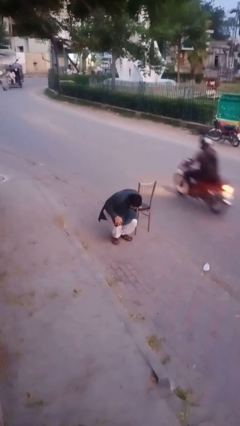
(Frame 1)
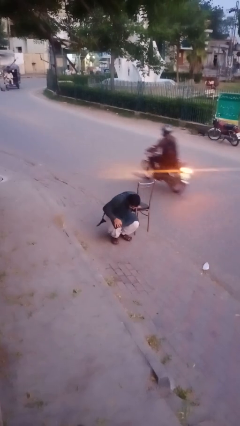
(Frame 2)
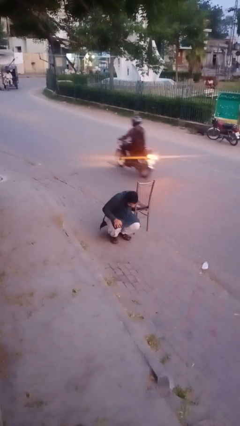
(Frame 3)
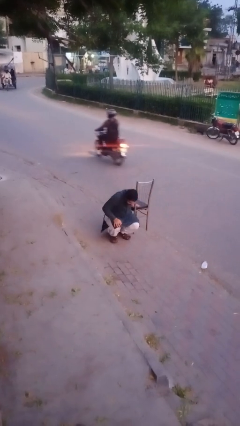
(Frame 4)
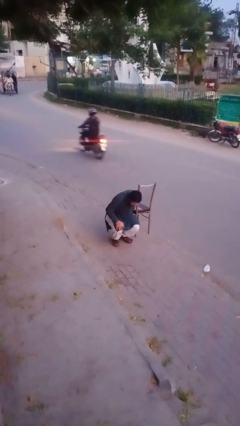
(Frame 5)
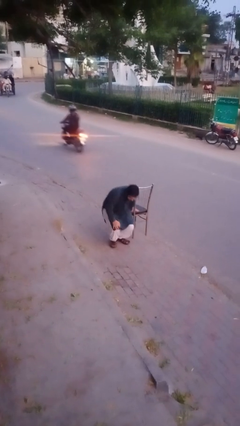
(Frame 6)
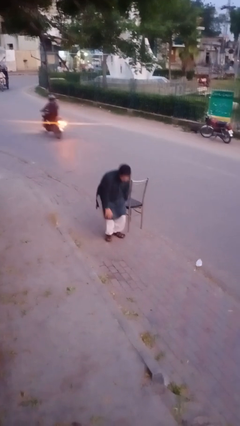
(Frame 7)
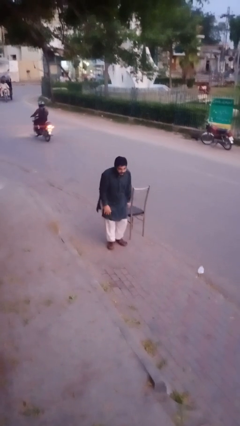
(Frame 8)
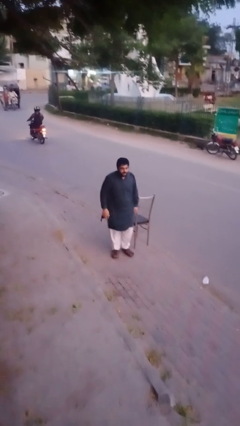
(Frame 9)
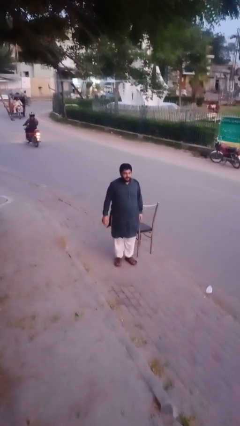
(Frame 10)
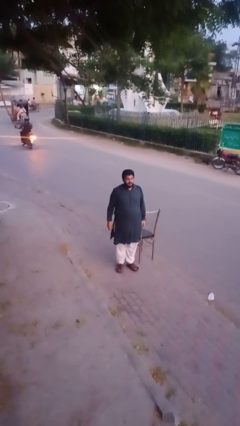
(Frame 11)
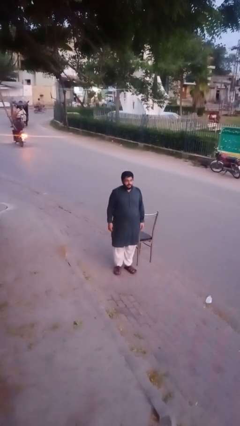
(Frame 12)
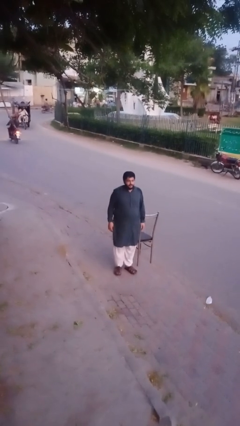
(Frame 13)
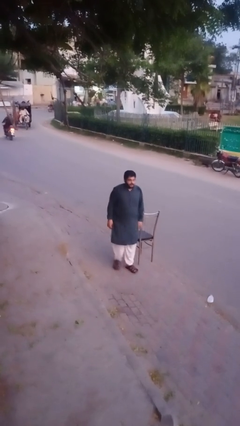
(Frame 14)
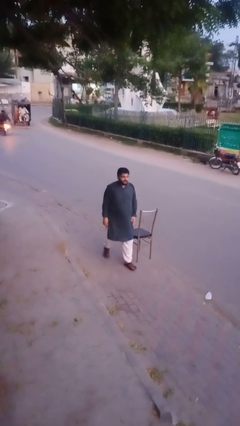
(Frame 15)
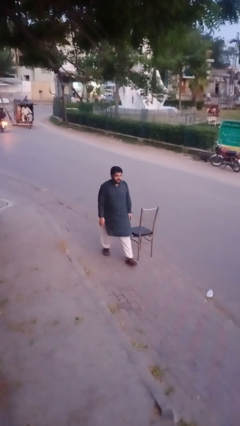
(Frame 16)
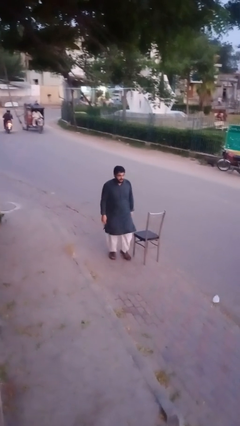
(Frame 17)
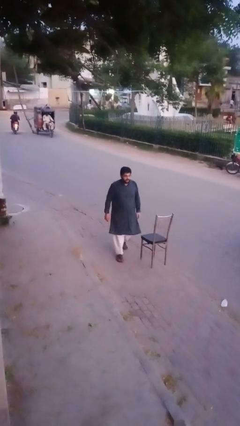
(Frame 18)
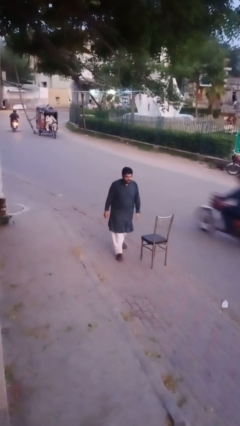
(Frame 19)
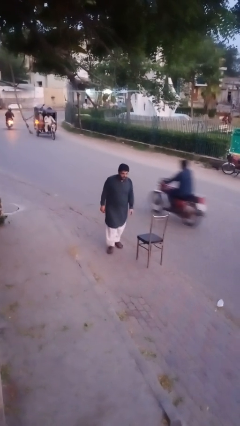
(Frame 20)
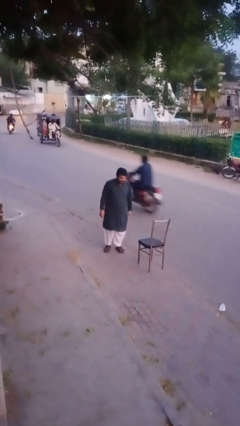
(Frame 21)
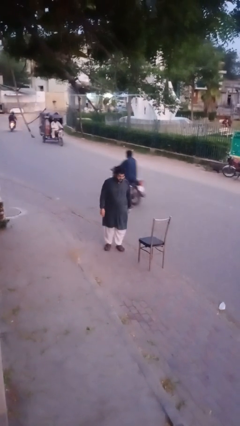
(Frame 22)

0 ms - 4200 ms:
person stands up from floor

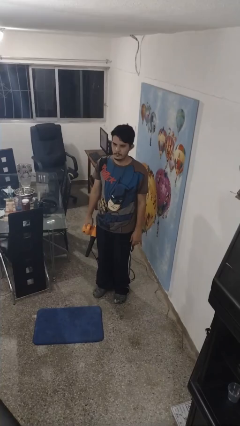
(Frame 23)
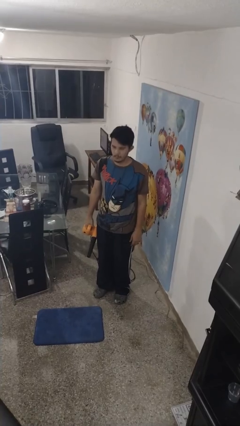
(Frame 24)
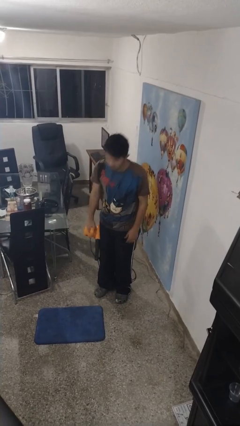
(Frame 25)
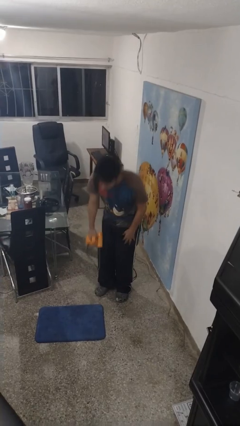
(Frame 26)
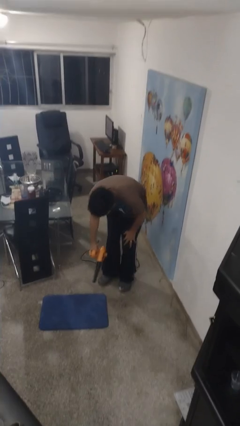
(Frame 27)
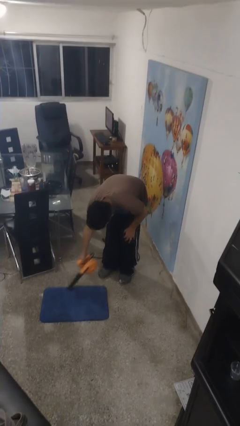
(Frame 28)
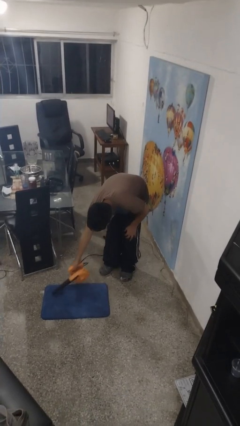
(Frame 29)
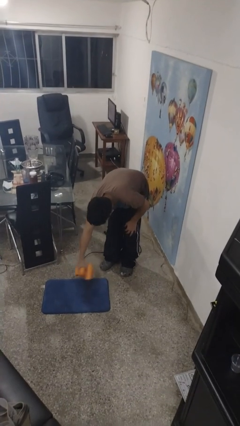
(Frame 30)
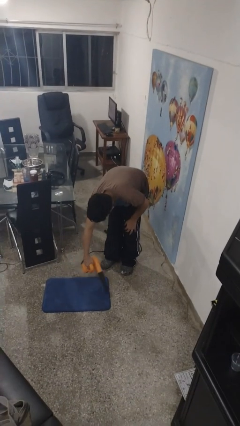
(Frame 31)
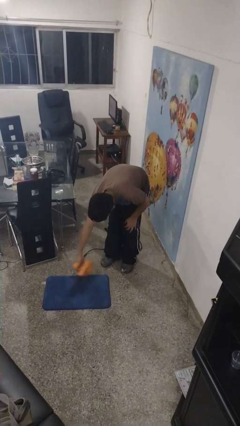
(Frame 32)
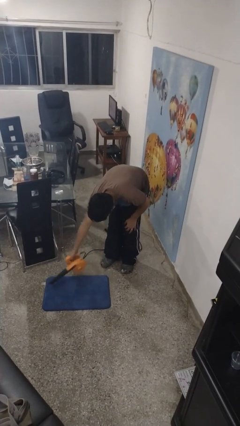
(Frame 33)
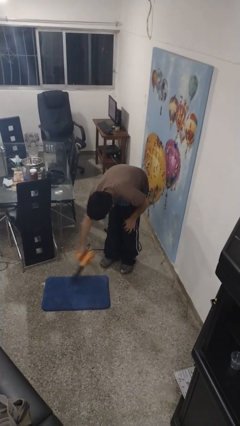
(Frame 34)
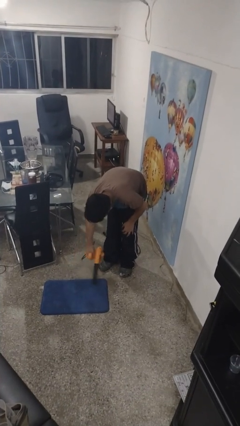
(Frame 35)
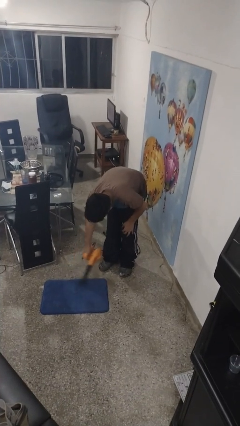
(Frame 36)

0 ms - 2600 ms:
person vacuums carpet

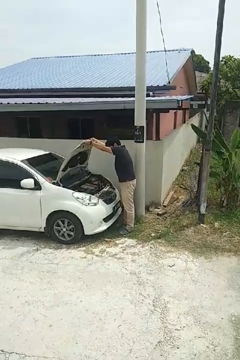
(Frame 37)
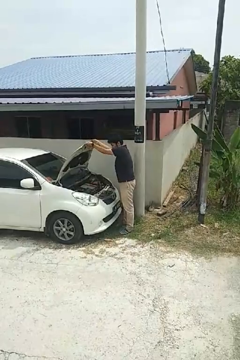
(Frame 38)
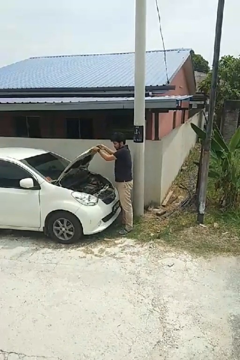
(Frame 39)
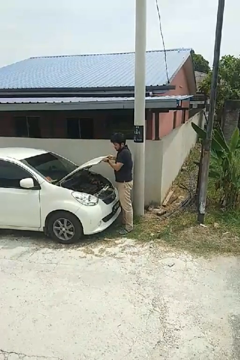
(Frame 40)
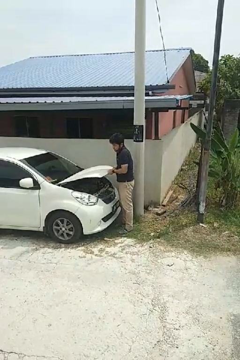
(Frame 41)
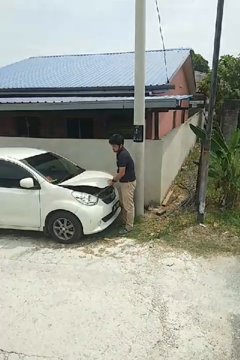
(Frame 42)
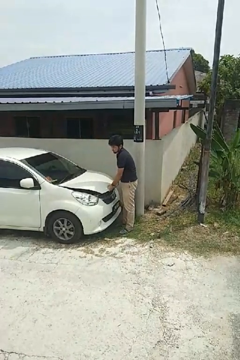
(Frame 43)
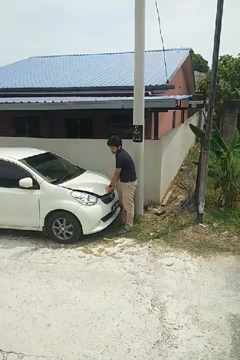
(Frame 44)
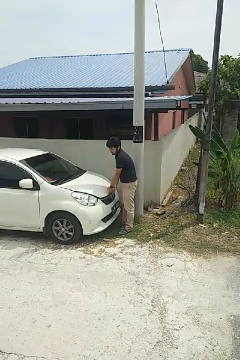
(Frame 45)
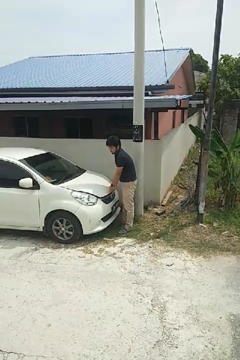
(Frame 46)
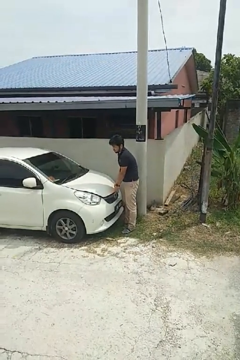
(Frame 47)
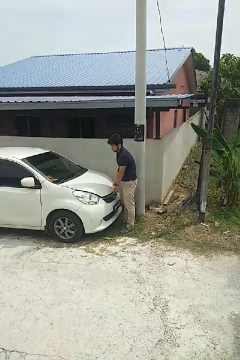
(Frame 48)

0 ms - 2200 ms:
person closes car hood

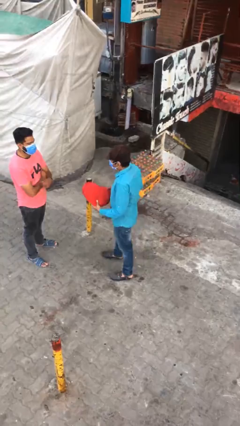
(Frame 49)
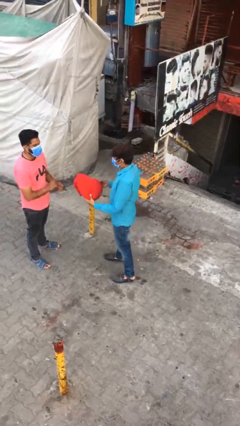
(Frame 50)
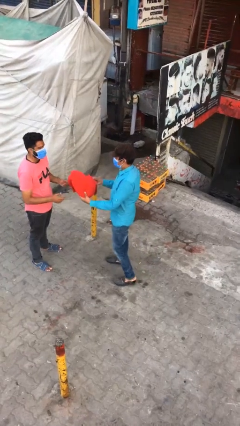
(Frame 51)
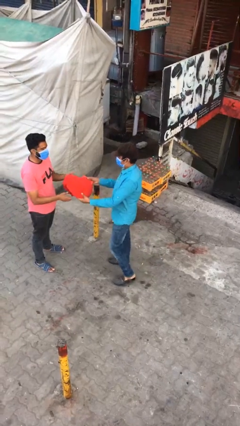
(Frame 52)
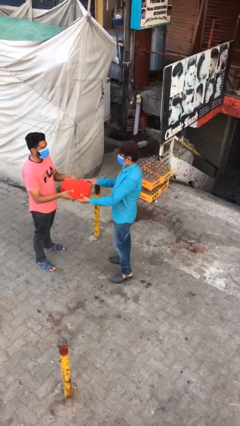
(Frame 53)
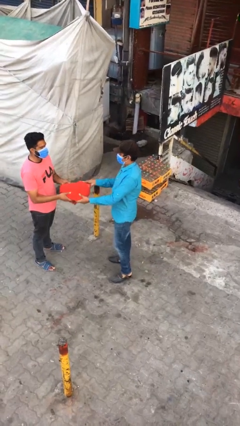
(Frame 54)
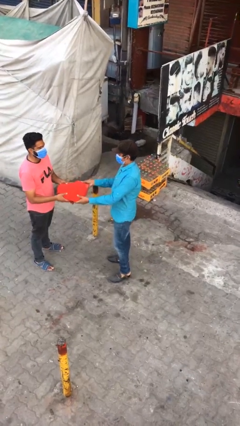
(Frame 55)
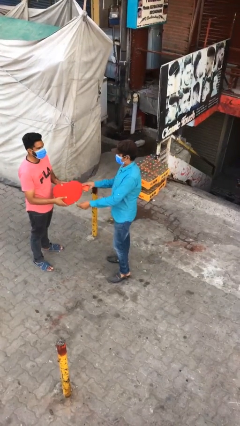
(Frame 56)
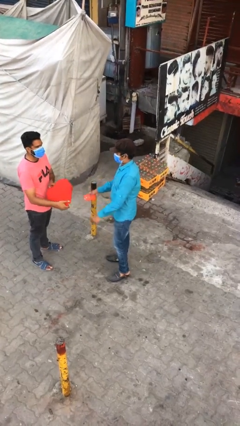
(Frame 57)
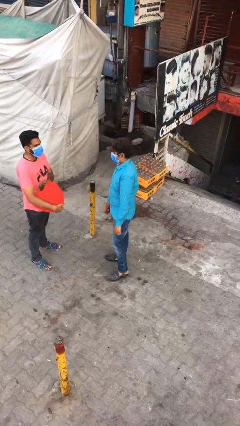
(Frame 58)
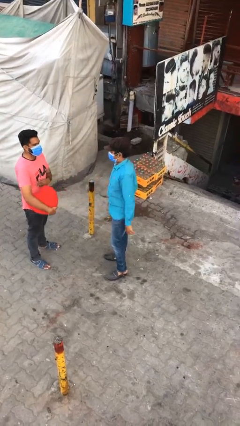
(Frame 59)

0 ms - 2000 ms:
person transfers object to person

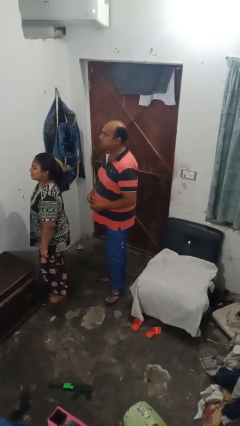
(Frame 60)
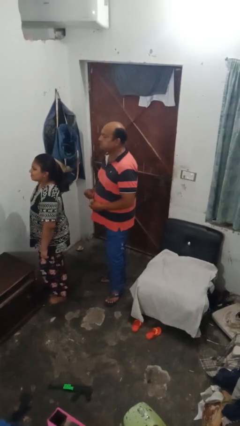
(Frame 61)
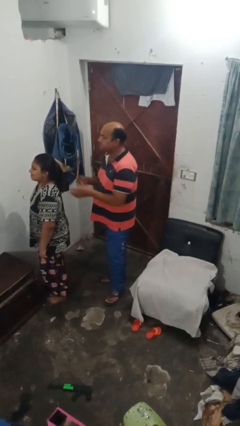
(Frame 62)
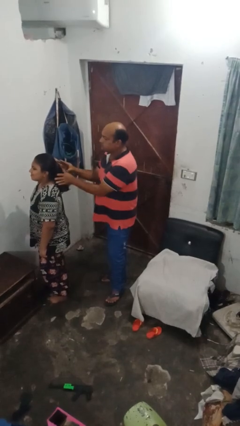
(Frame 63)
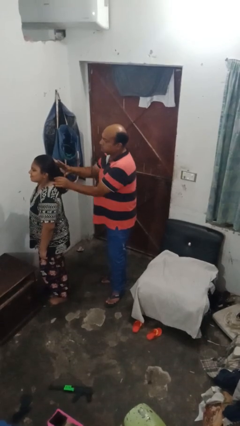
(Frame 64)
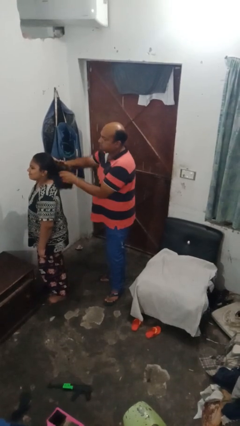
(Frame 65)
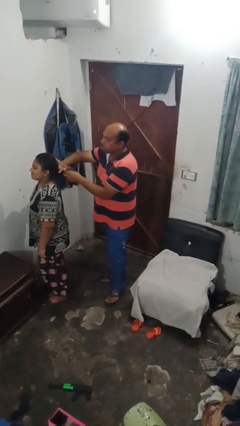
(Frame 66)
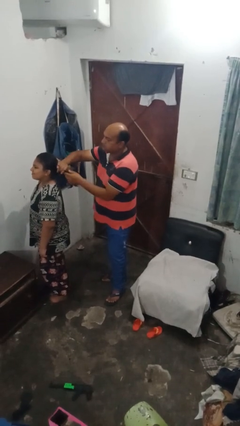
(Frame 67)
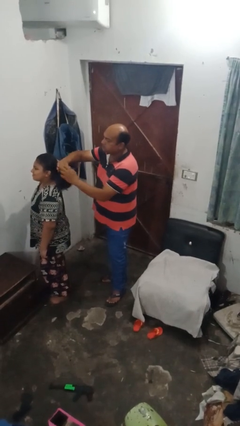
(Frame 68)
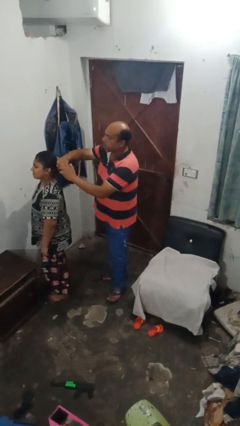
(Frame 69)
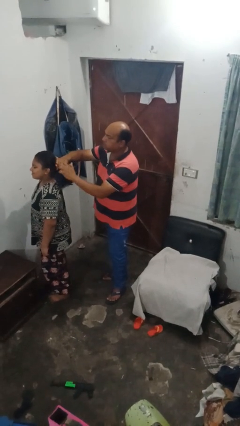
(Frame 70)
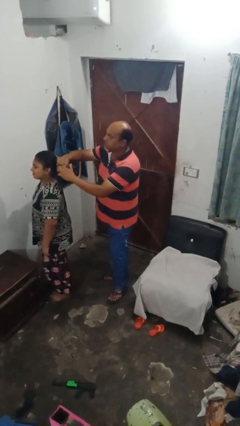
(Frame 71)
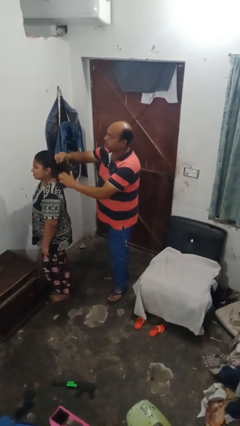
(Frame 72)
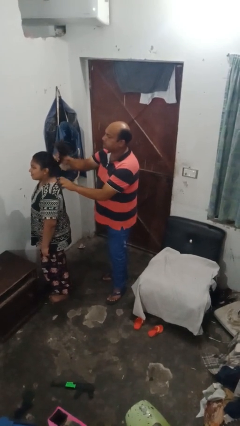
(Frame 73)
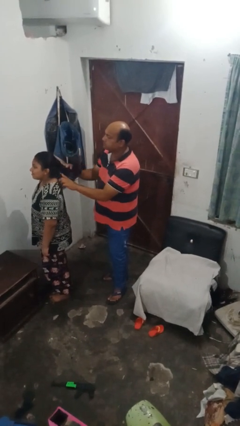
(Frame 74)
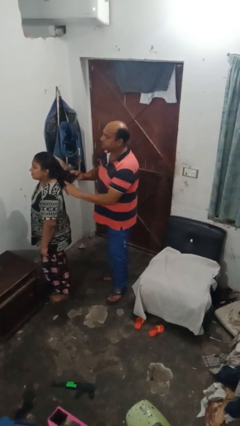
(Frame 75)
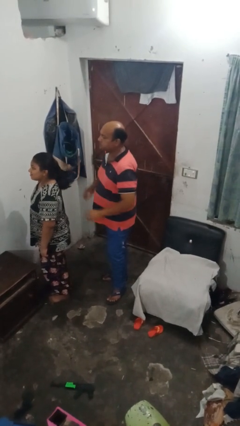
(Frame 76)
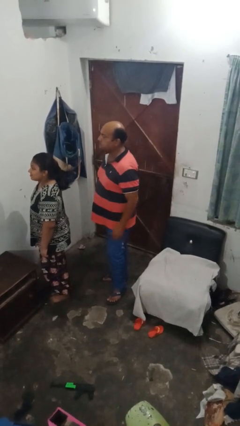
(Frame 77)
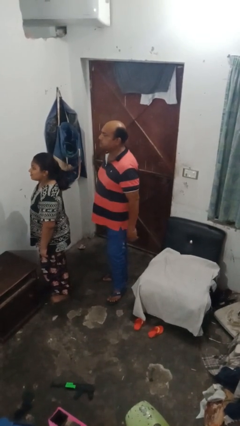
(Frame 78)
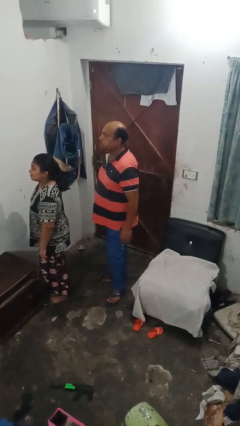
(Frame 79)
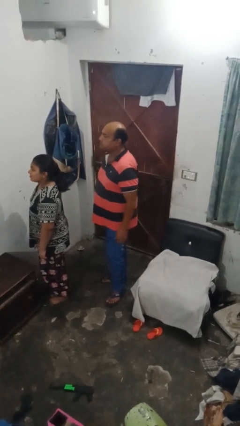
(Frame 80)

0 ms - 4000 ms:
person braids hair of person

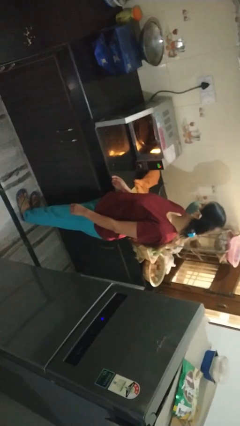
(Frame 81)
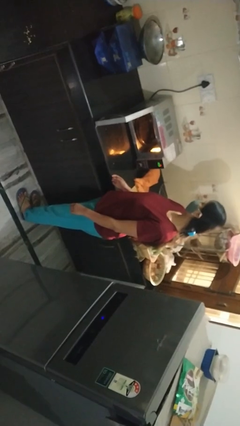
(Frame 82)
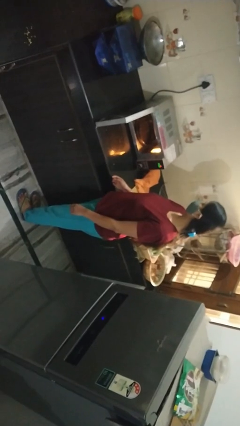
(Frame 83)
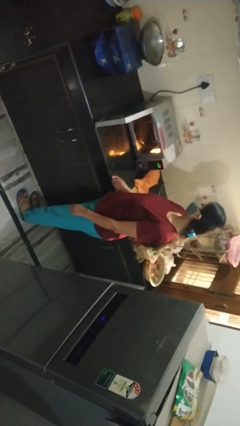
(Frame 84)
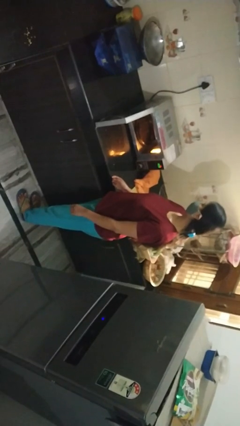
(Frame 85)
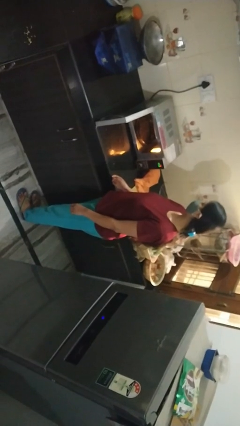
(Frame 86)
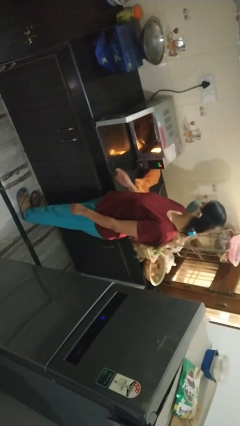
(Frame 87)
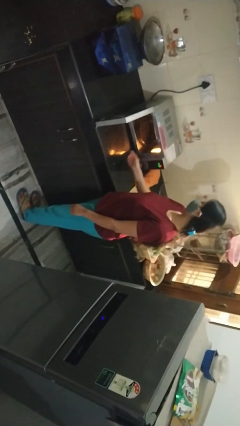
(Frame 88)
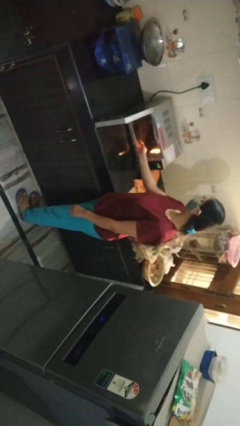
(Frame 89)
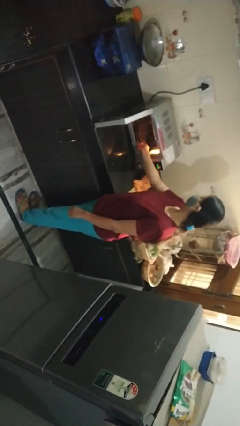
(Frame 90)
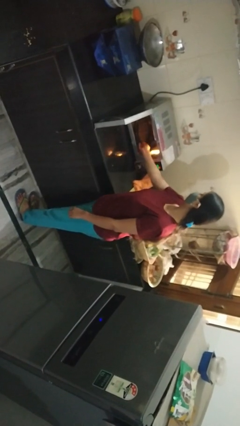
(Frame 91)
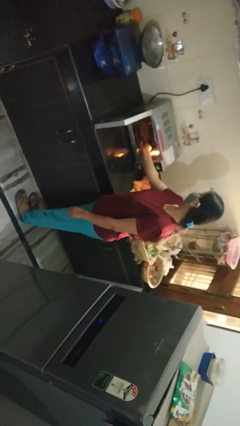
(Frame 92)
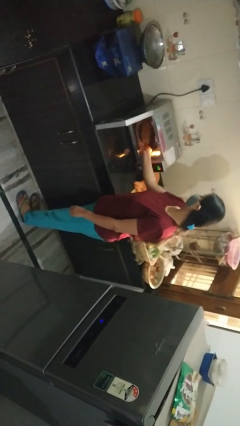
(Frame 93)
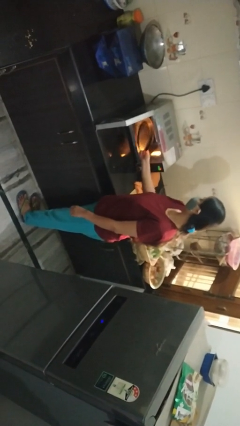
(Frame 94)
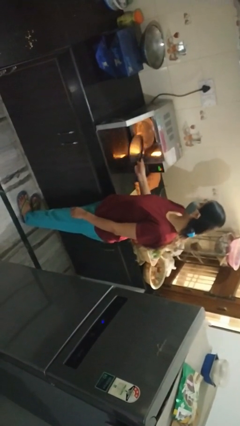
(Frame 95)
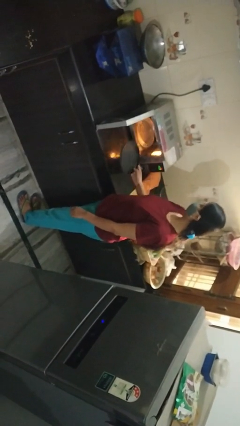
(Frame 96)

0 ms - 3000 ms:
person takes object from microwave
